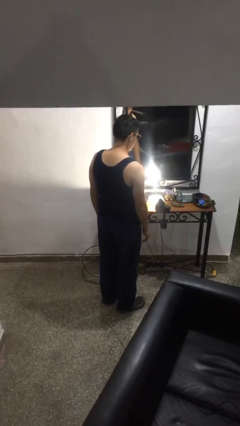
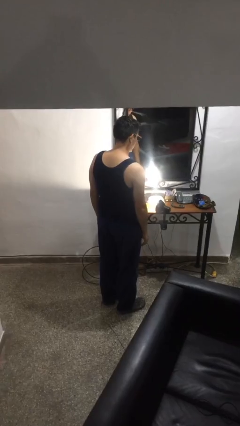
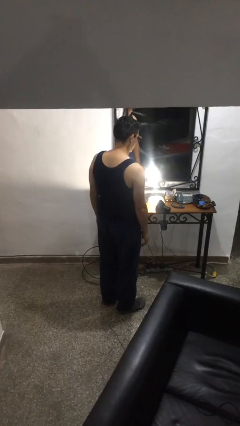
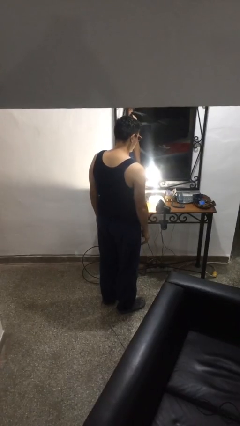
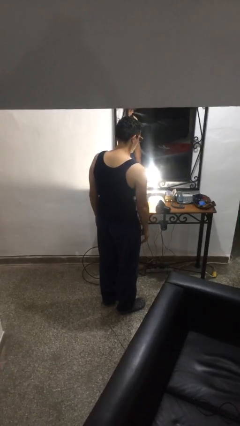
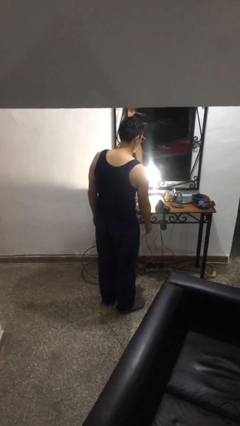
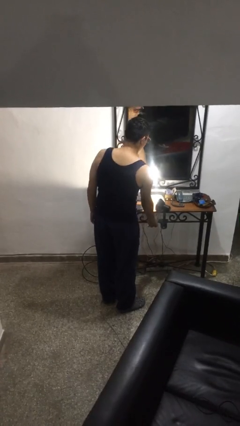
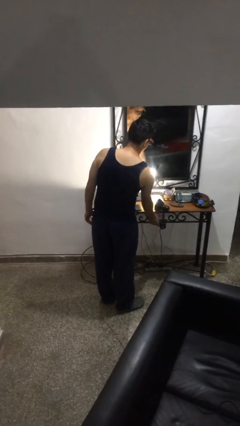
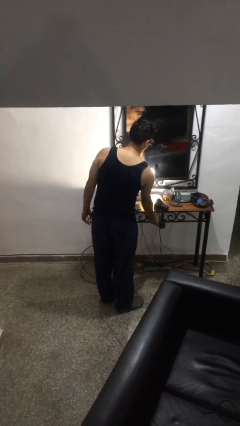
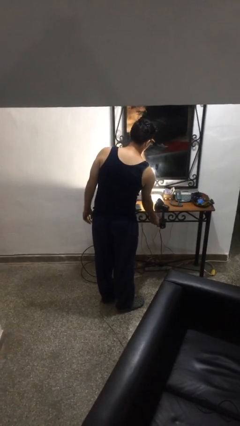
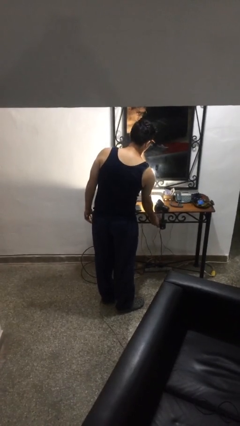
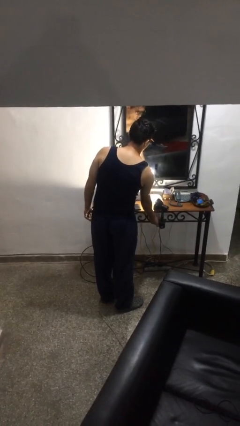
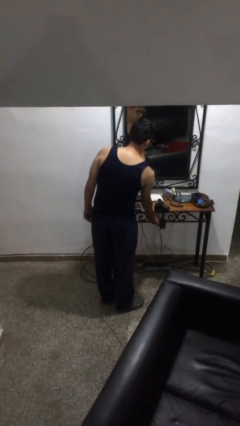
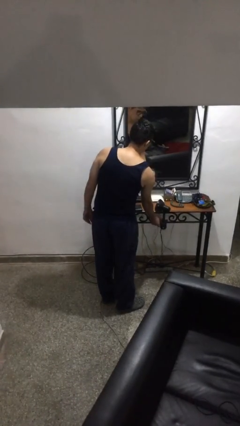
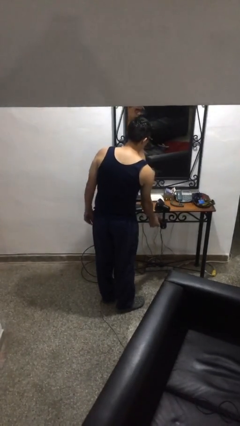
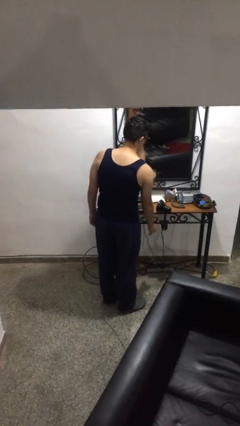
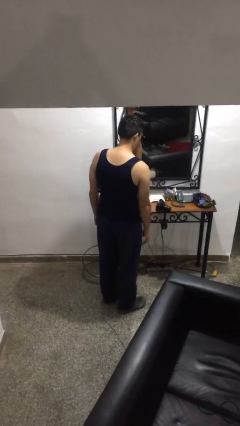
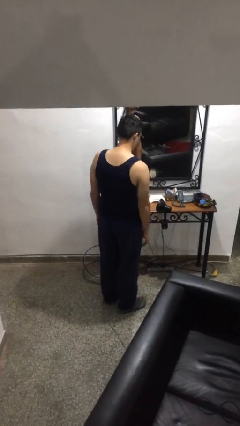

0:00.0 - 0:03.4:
person turns off lamp

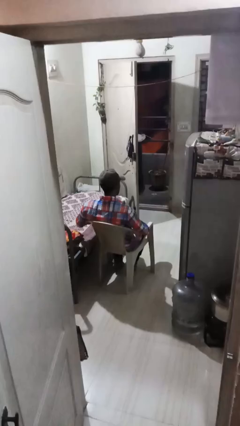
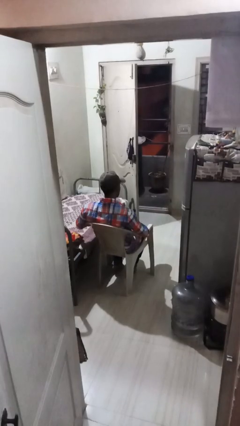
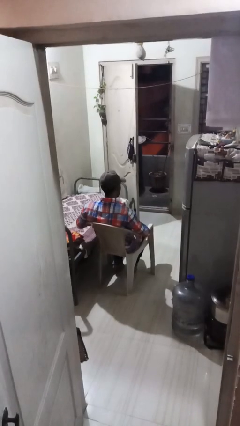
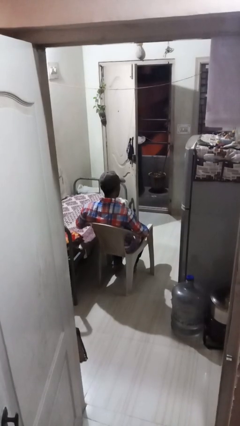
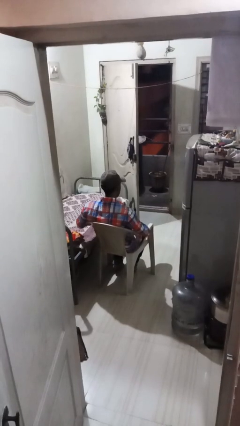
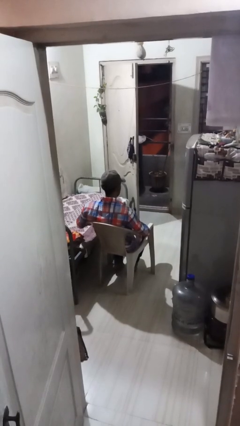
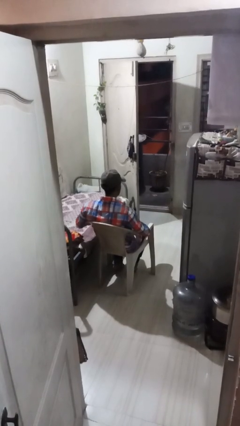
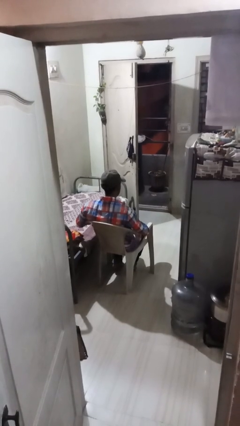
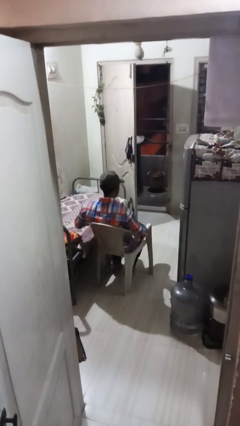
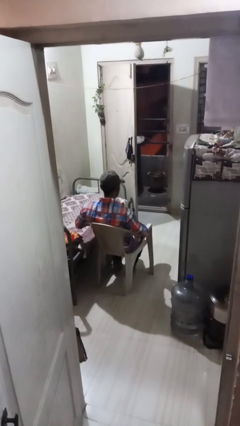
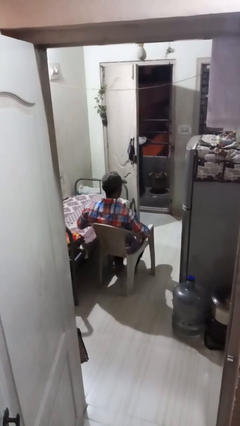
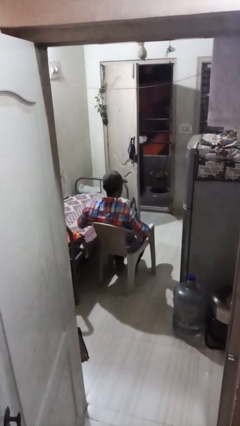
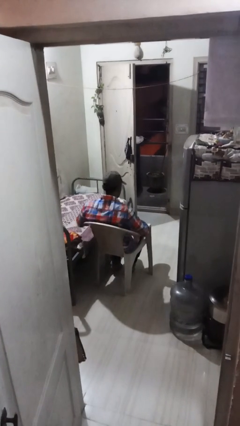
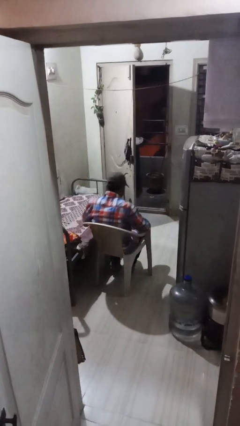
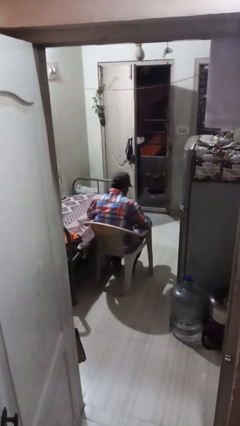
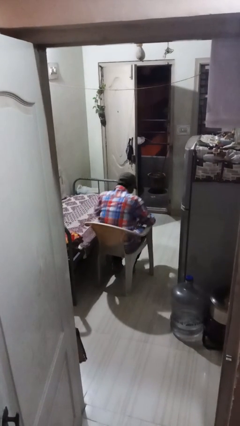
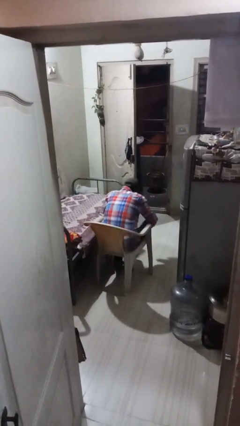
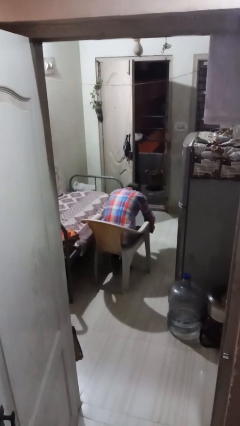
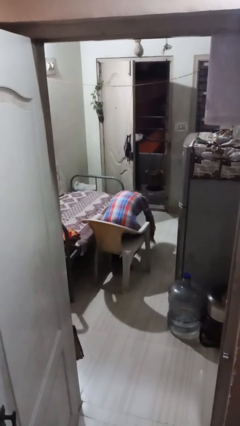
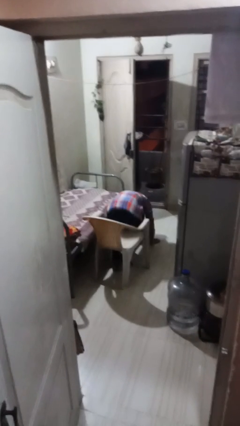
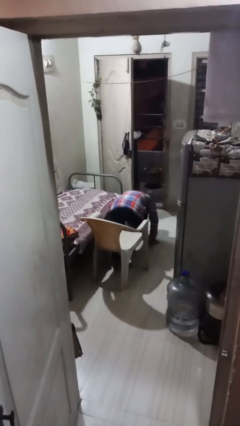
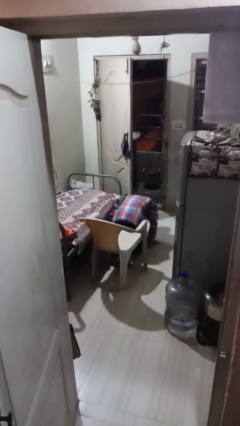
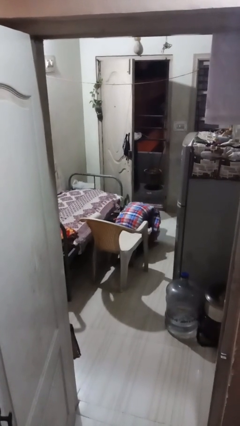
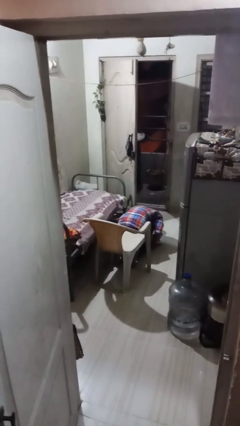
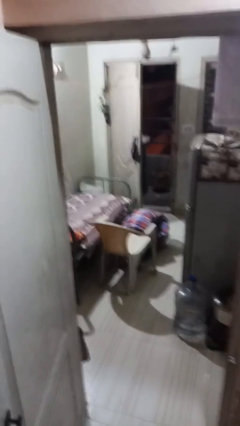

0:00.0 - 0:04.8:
person falls from chair

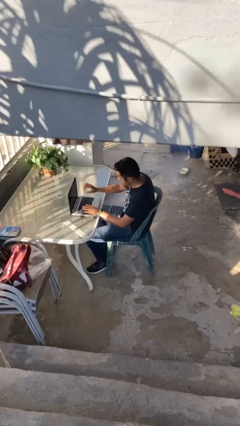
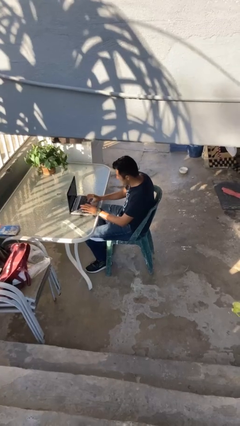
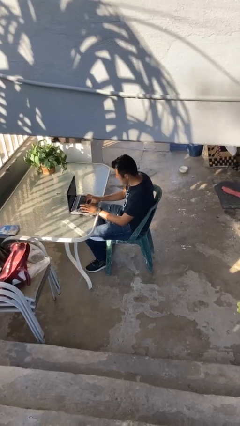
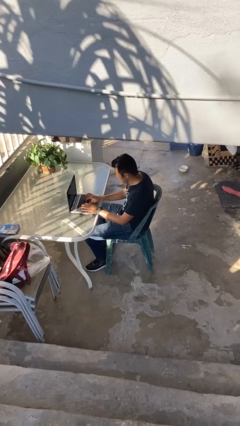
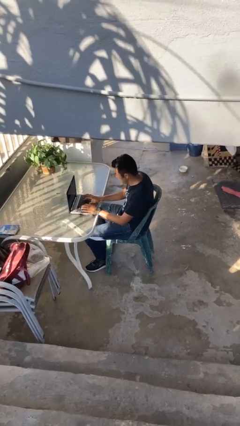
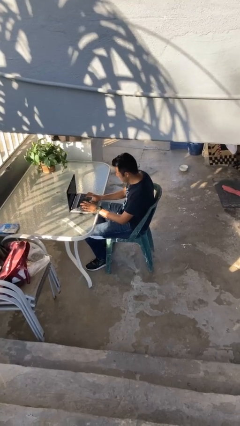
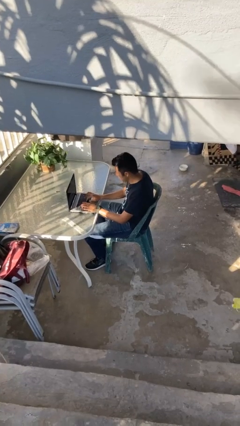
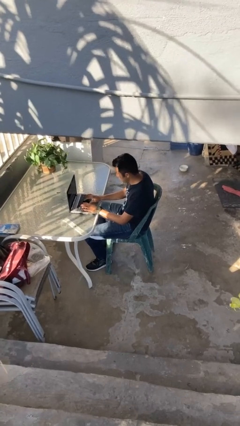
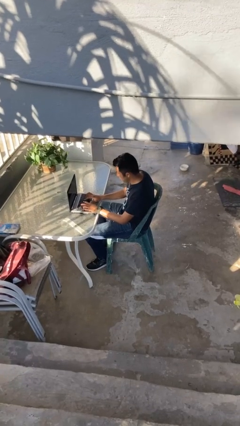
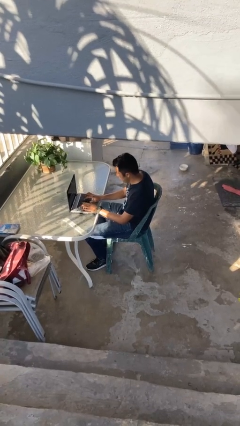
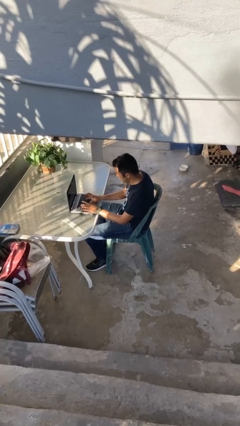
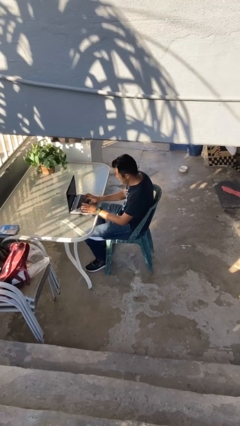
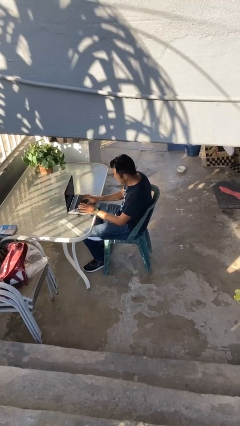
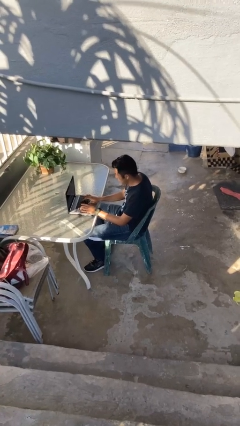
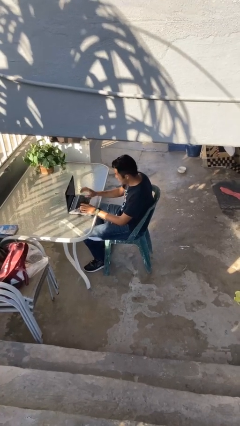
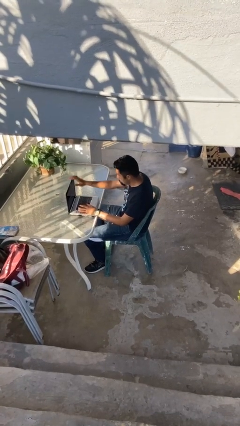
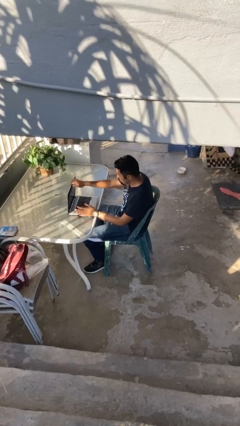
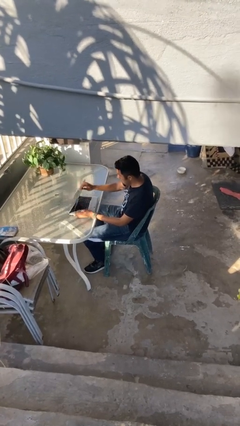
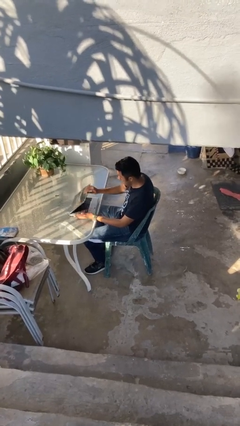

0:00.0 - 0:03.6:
person interacts with laptop

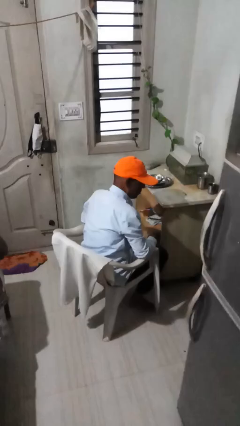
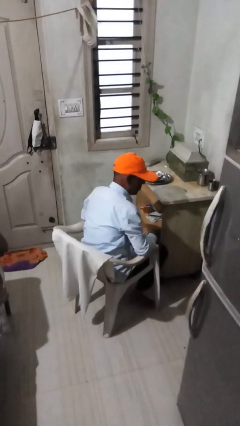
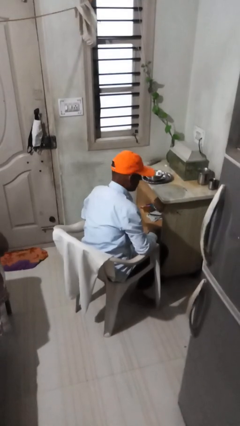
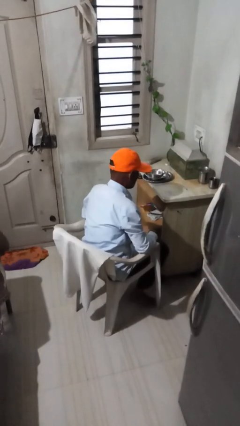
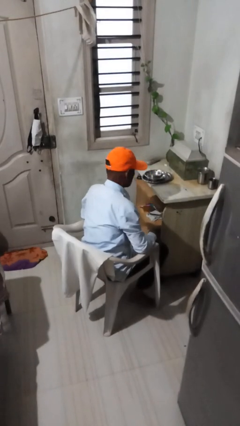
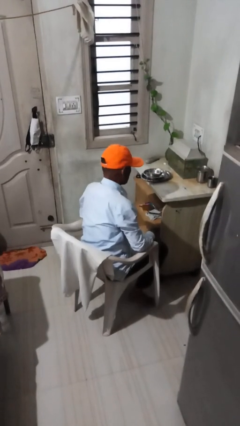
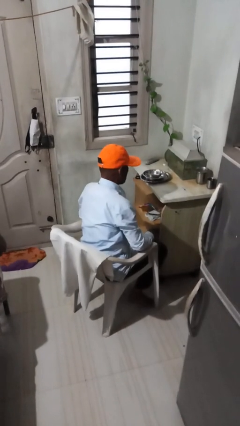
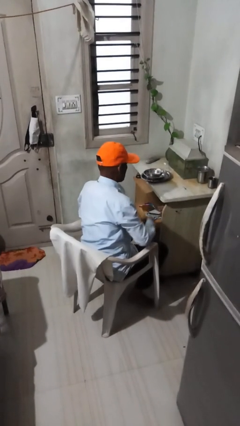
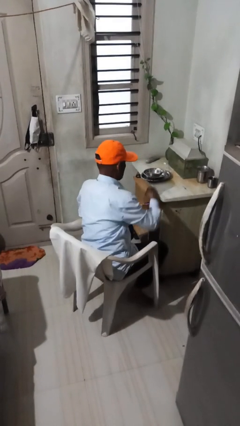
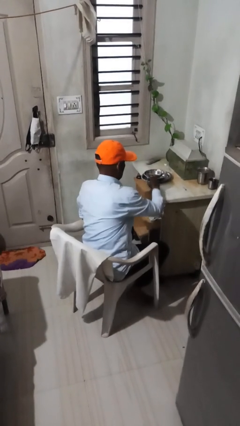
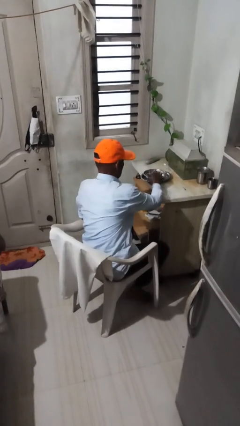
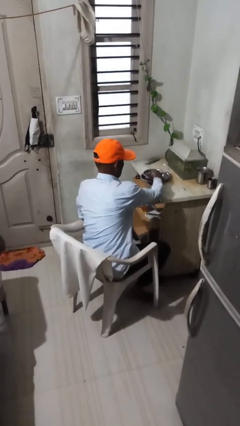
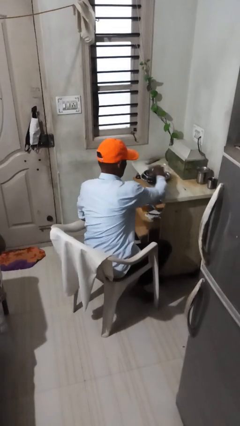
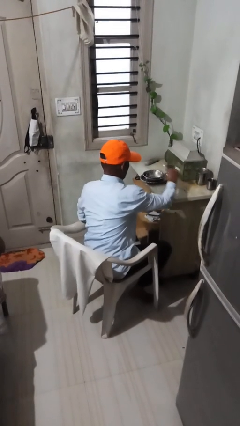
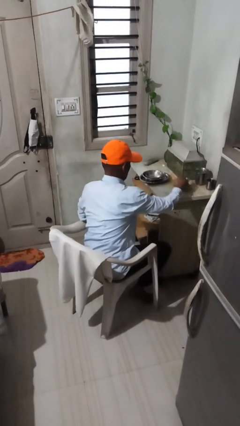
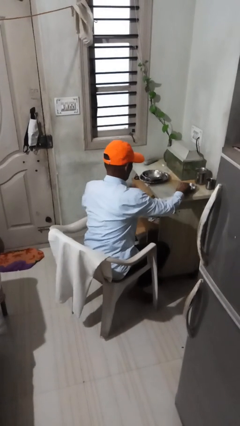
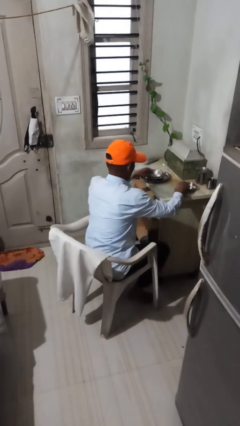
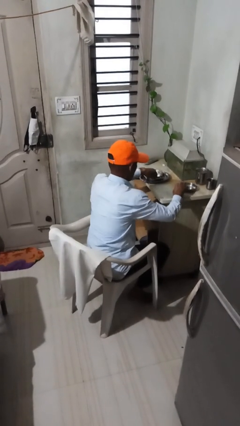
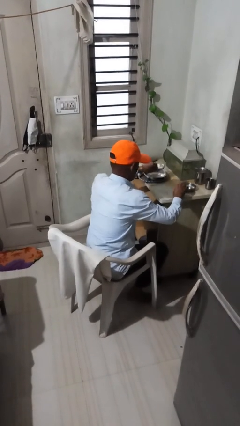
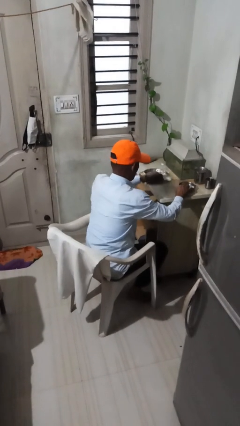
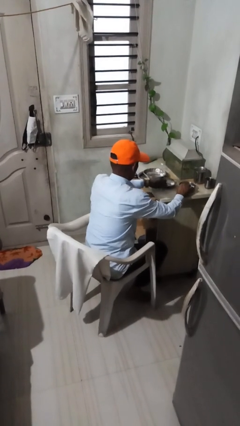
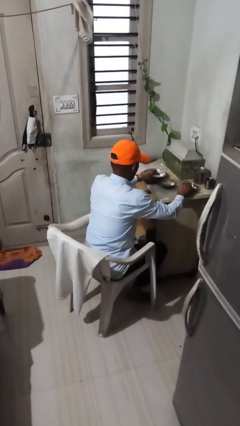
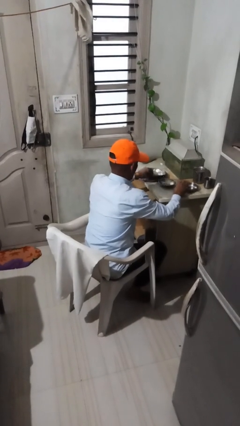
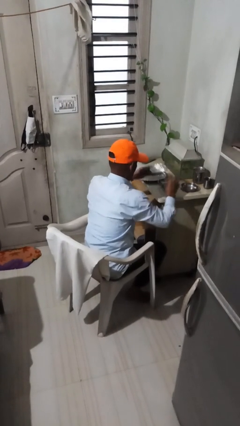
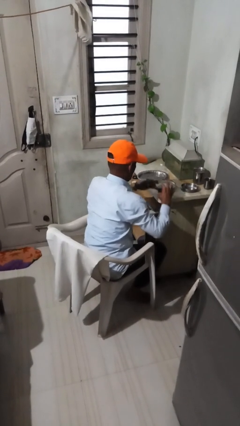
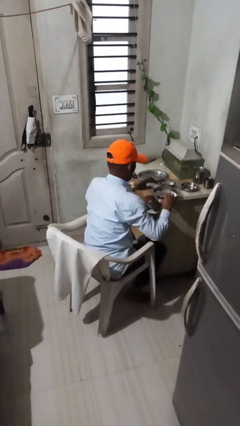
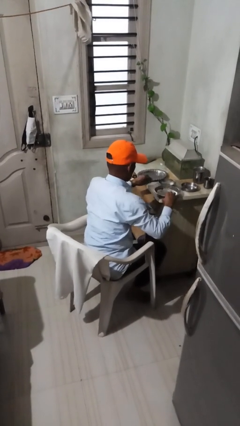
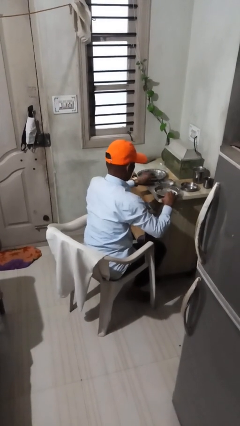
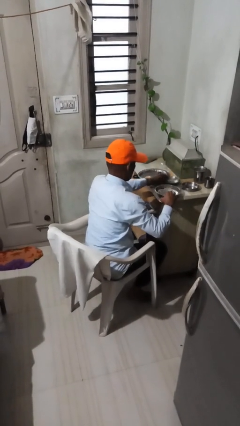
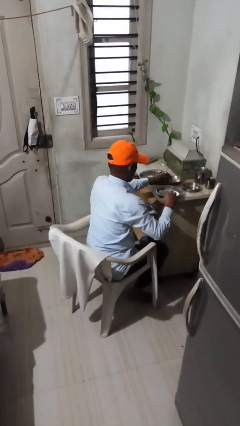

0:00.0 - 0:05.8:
person sets table
